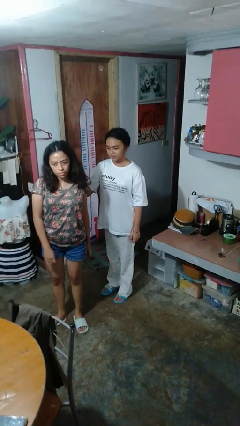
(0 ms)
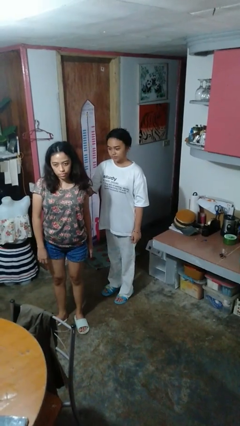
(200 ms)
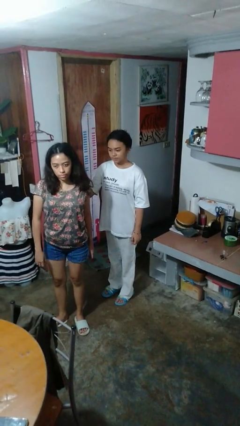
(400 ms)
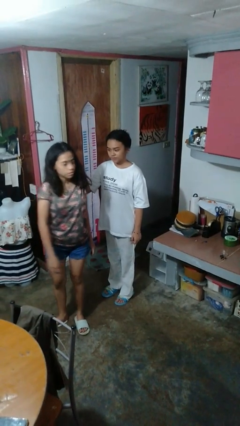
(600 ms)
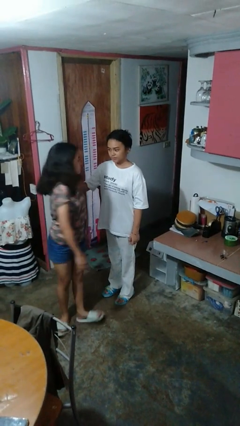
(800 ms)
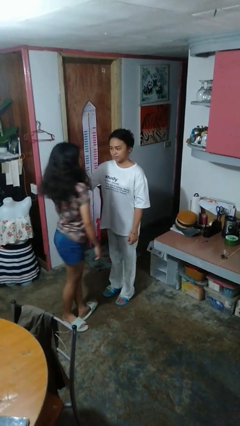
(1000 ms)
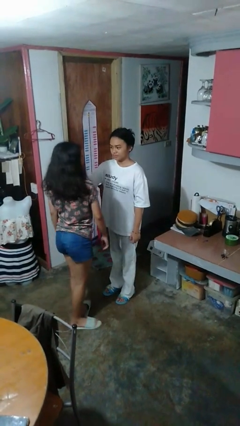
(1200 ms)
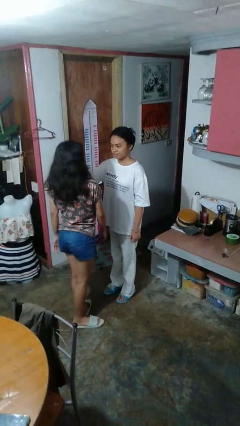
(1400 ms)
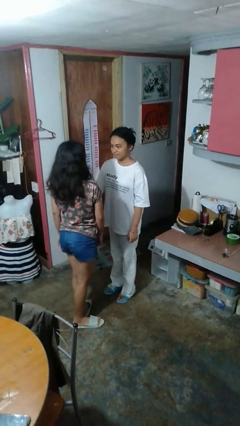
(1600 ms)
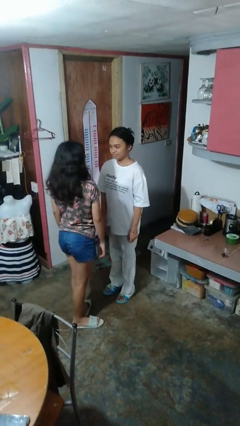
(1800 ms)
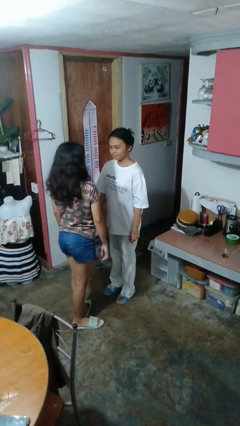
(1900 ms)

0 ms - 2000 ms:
person spins person around

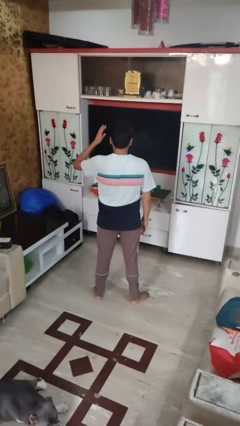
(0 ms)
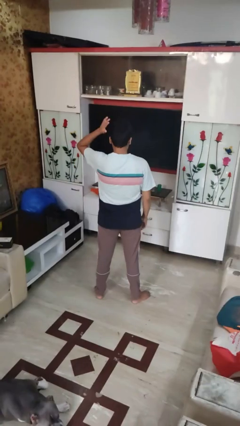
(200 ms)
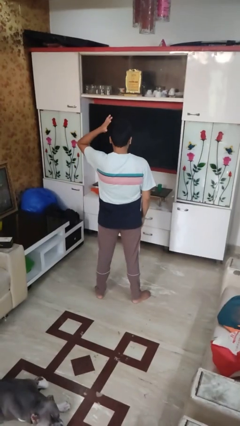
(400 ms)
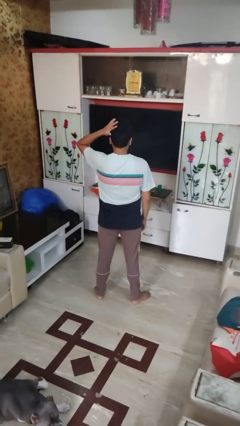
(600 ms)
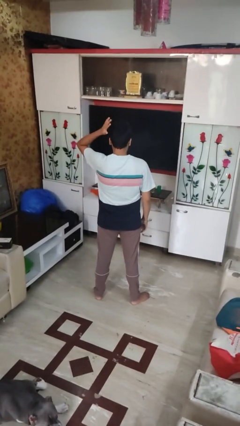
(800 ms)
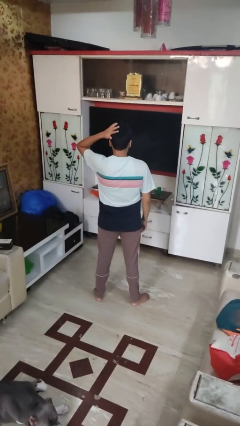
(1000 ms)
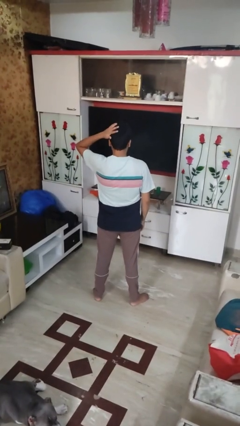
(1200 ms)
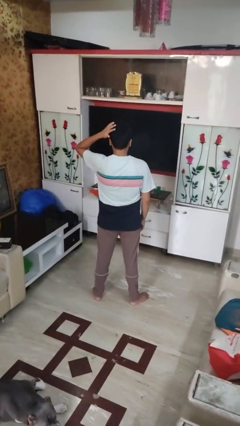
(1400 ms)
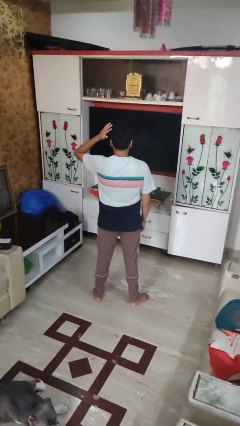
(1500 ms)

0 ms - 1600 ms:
person pats head

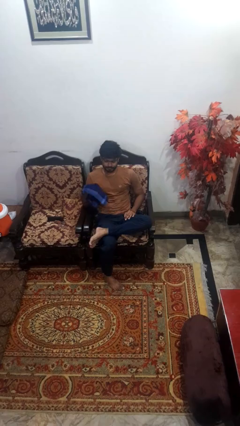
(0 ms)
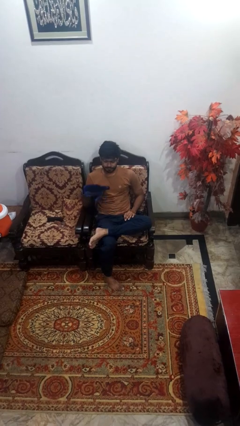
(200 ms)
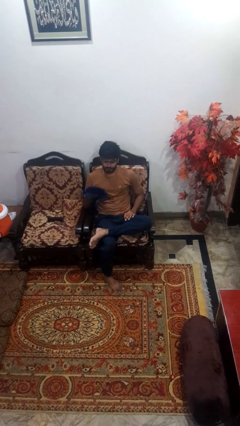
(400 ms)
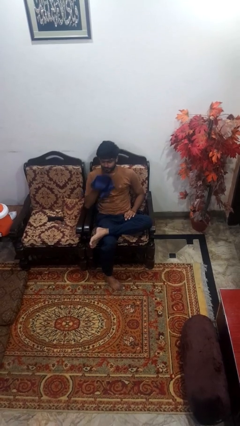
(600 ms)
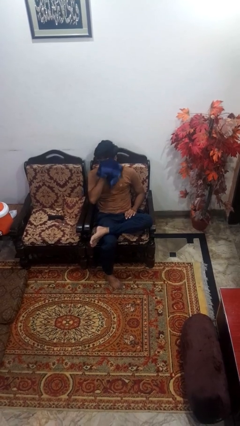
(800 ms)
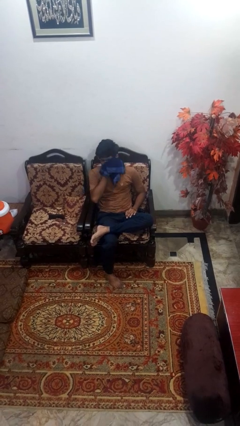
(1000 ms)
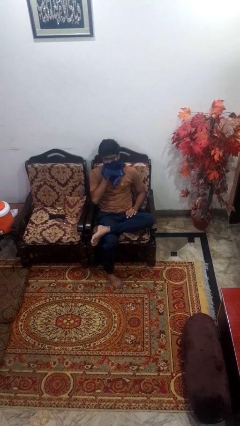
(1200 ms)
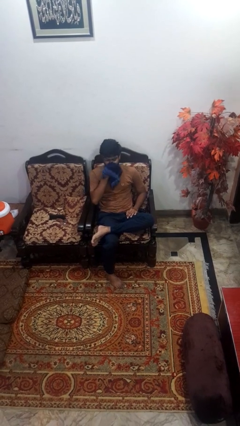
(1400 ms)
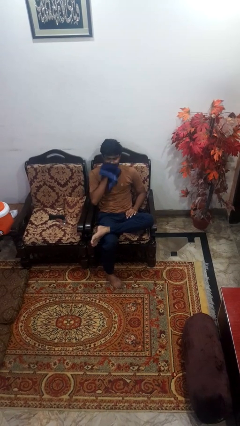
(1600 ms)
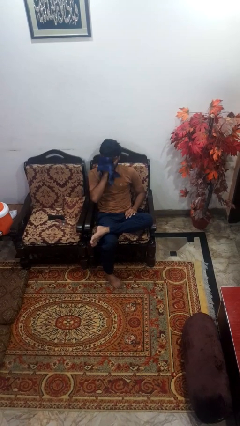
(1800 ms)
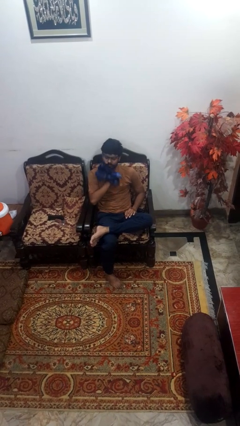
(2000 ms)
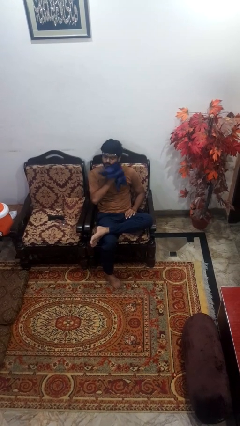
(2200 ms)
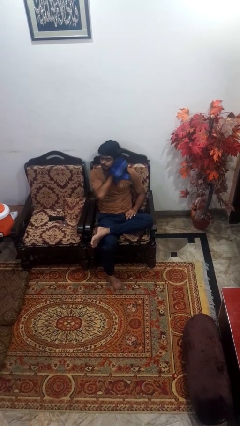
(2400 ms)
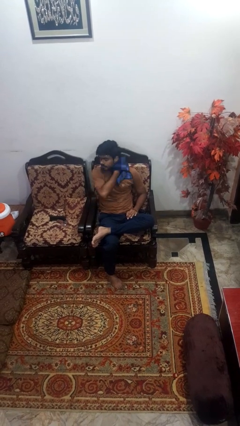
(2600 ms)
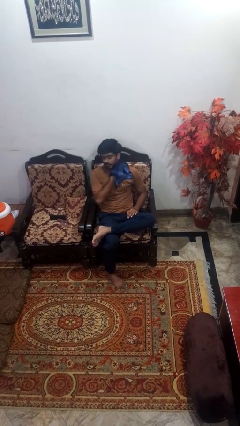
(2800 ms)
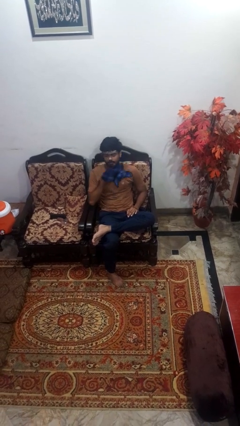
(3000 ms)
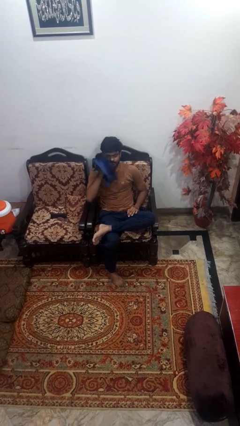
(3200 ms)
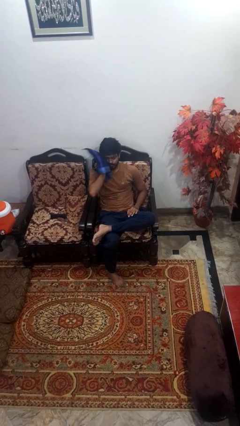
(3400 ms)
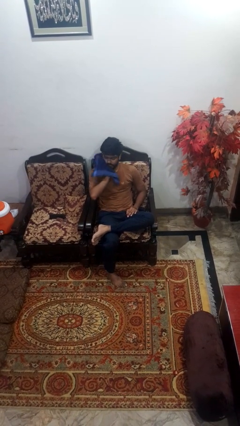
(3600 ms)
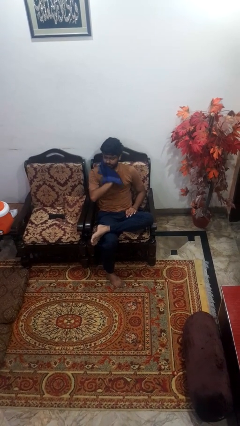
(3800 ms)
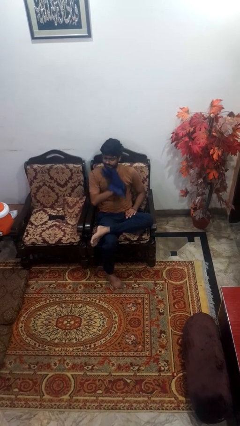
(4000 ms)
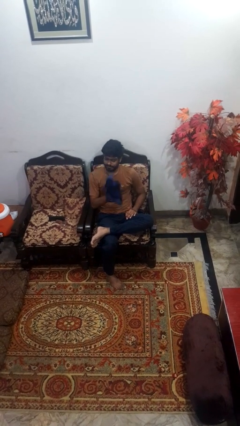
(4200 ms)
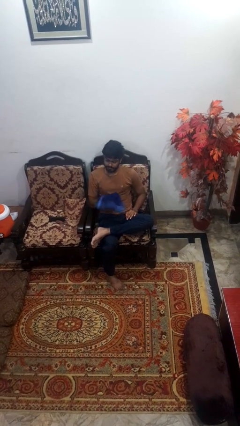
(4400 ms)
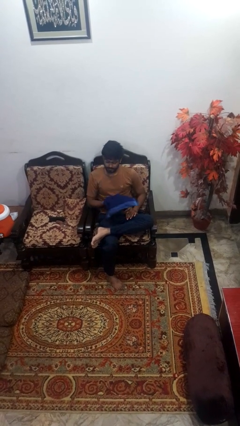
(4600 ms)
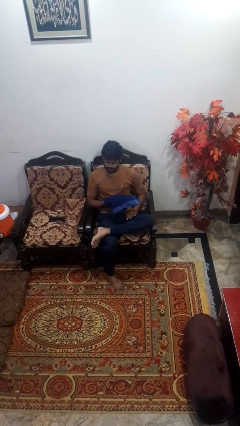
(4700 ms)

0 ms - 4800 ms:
person wipes mouth with napkin

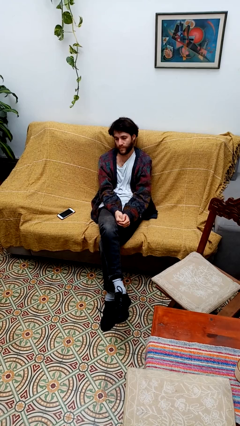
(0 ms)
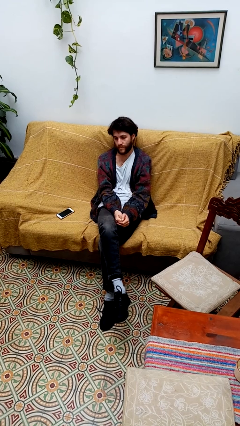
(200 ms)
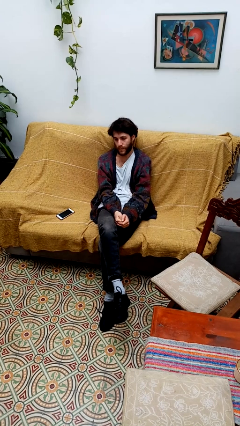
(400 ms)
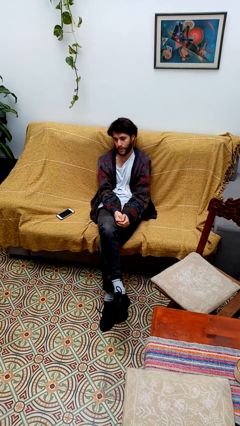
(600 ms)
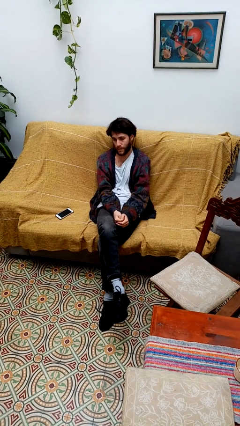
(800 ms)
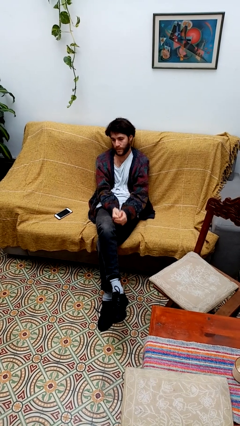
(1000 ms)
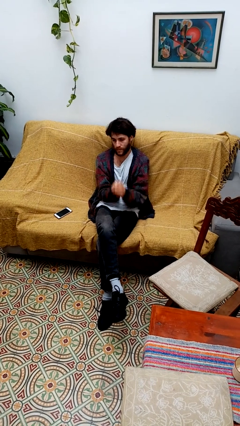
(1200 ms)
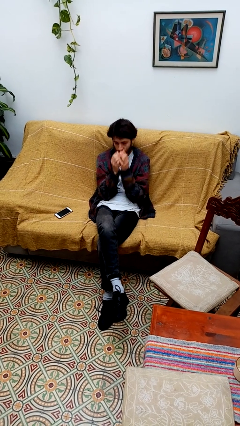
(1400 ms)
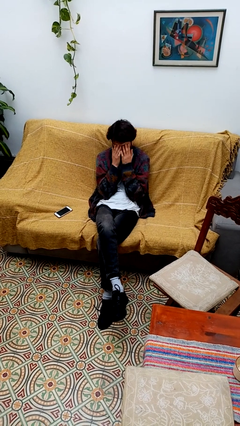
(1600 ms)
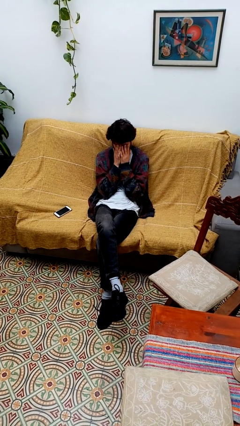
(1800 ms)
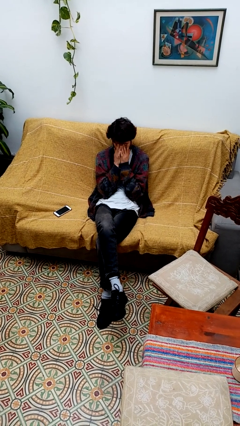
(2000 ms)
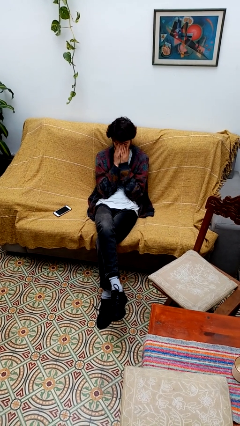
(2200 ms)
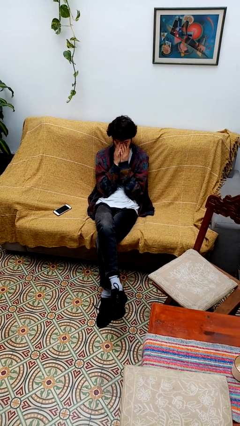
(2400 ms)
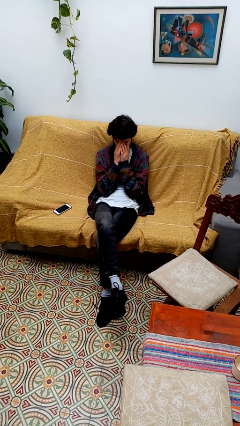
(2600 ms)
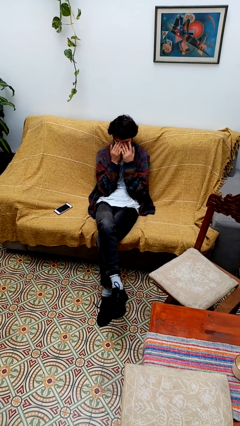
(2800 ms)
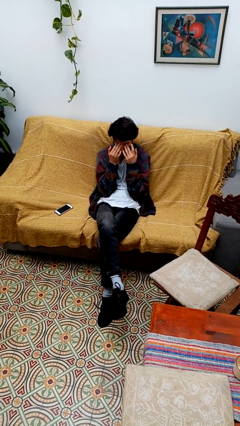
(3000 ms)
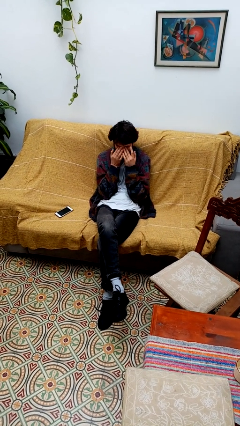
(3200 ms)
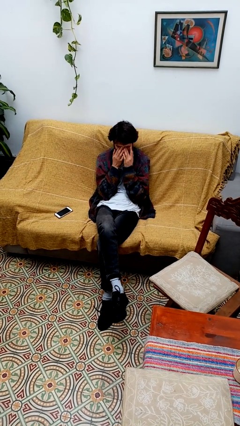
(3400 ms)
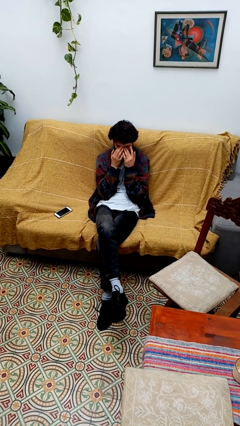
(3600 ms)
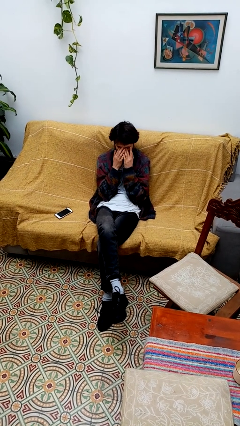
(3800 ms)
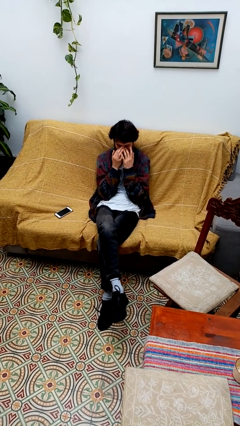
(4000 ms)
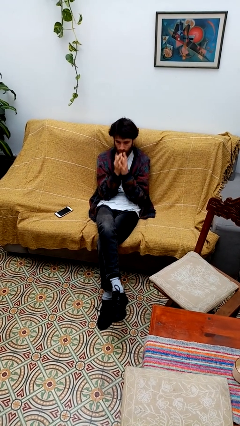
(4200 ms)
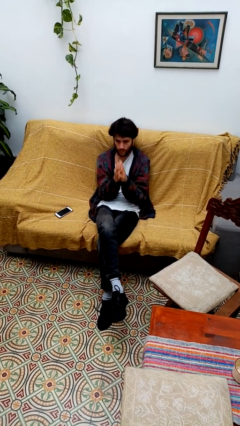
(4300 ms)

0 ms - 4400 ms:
person rubs eyes

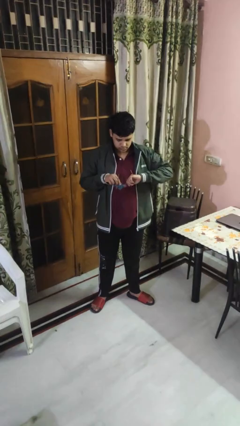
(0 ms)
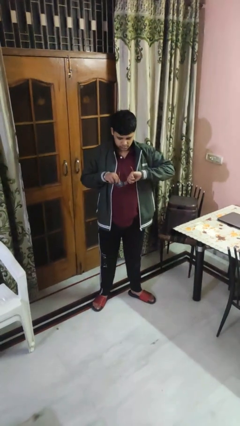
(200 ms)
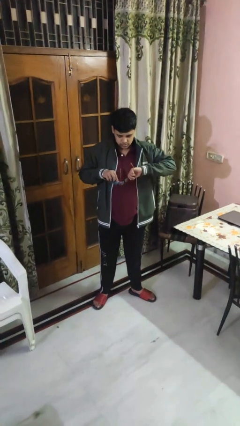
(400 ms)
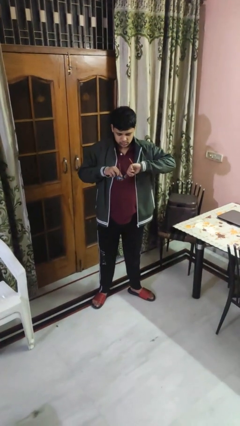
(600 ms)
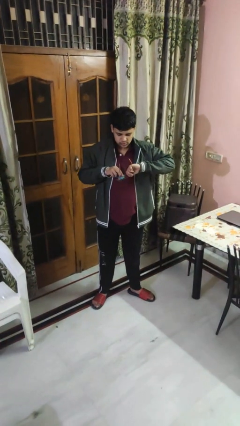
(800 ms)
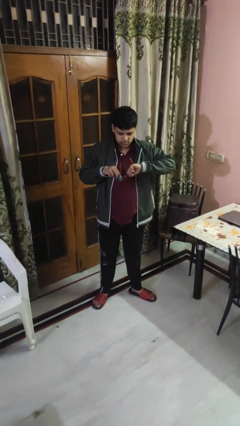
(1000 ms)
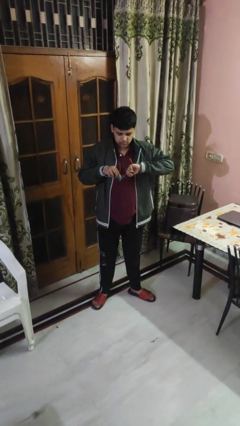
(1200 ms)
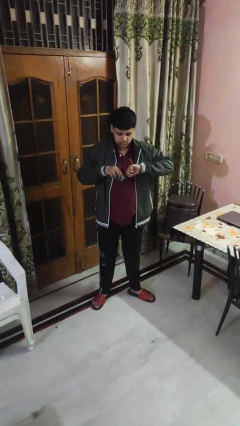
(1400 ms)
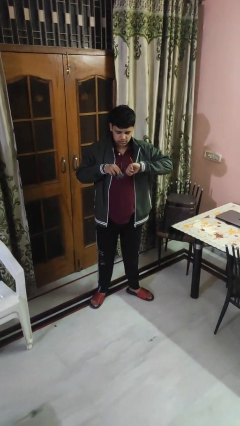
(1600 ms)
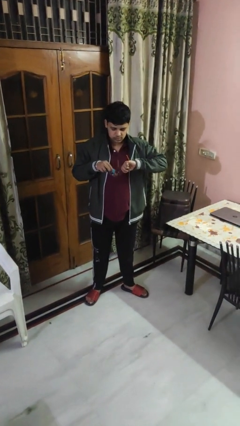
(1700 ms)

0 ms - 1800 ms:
person cleans eyeglasses

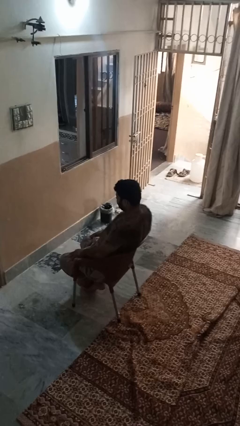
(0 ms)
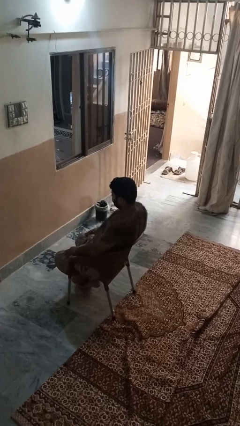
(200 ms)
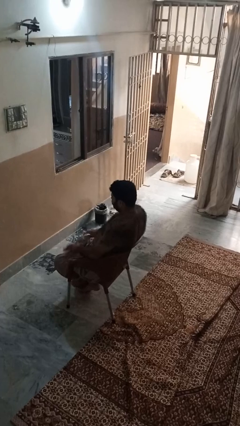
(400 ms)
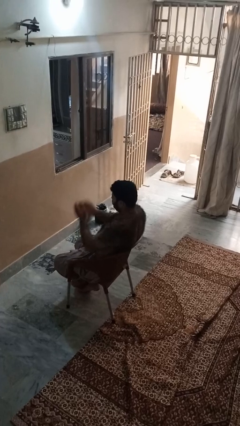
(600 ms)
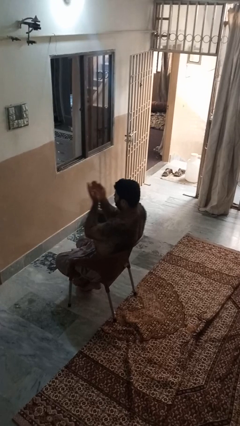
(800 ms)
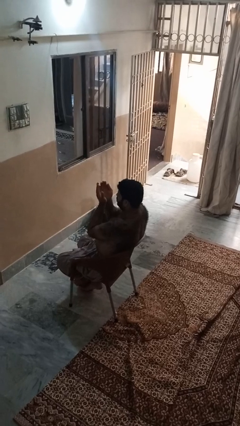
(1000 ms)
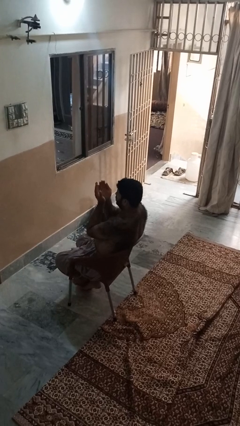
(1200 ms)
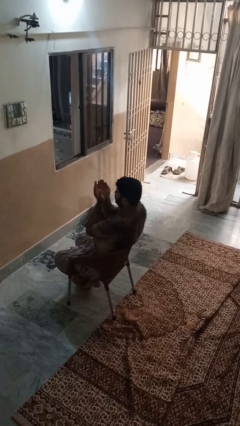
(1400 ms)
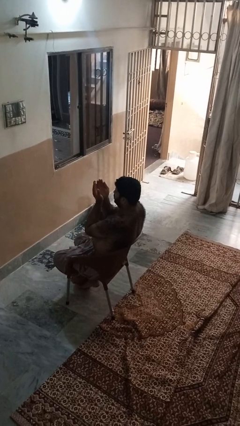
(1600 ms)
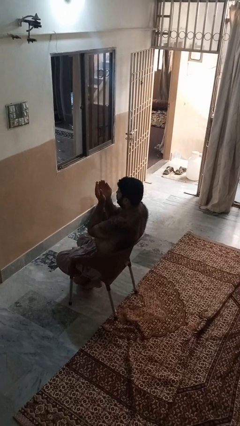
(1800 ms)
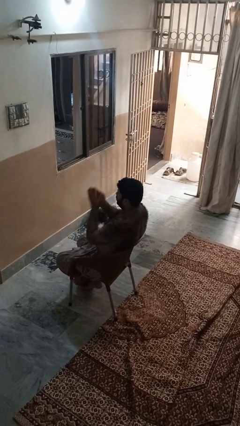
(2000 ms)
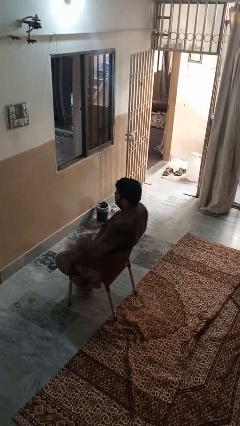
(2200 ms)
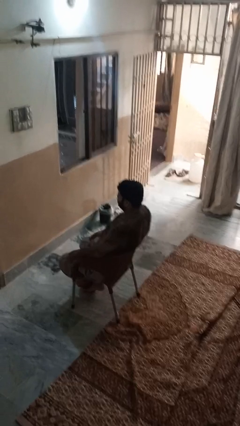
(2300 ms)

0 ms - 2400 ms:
person prays
